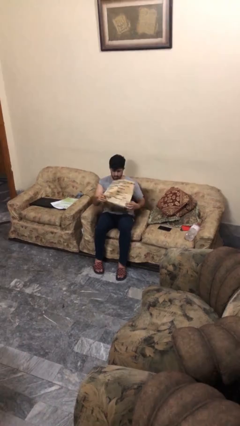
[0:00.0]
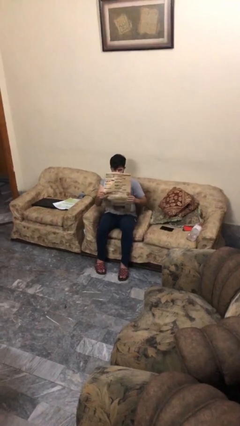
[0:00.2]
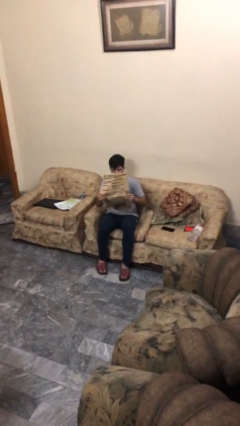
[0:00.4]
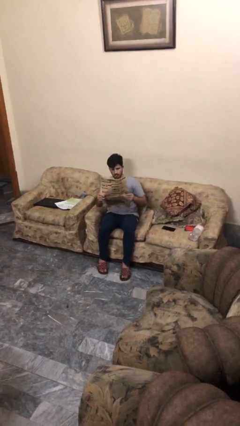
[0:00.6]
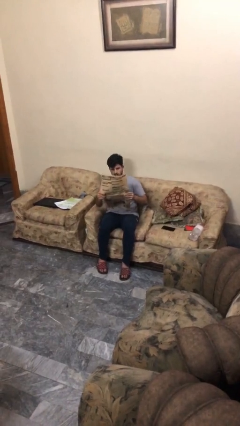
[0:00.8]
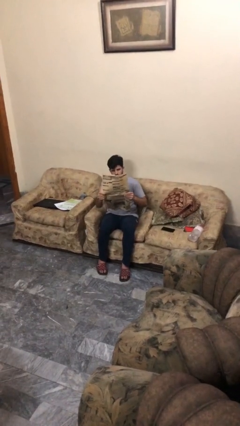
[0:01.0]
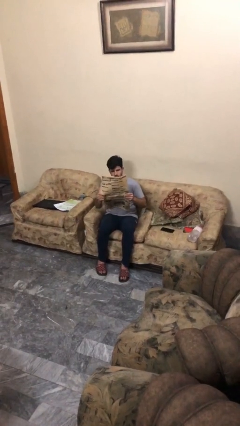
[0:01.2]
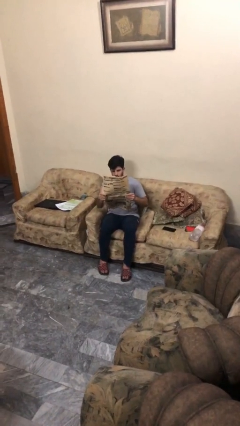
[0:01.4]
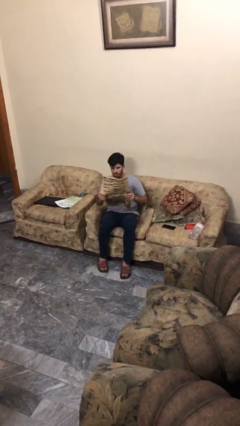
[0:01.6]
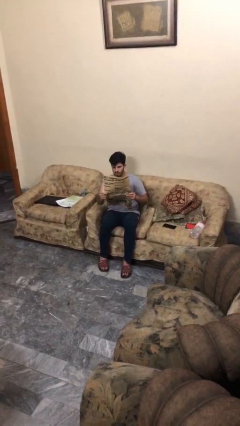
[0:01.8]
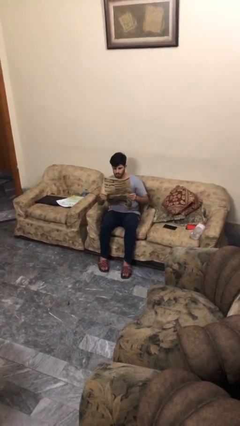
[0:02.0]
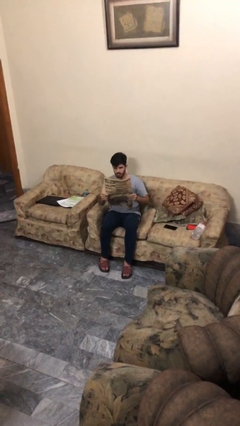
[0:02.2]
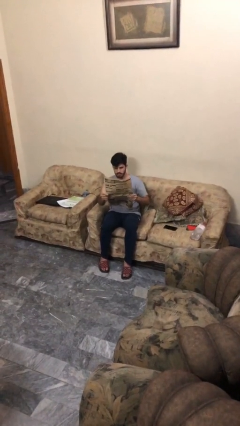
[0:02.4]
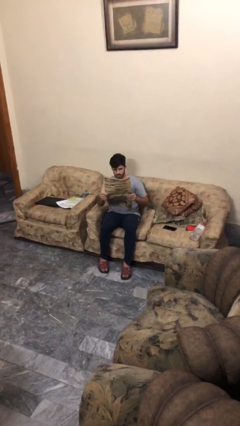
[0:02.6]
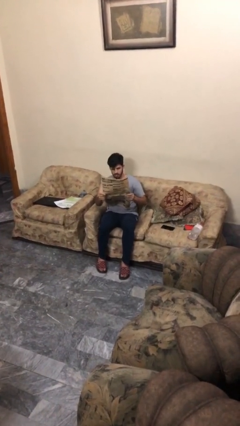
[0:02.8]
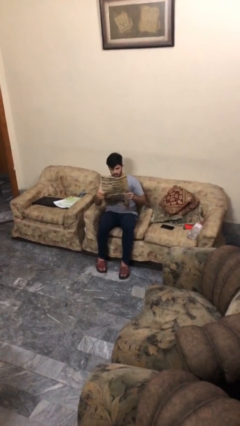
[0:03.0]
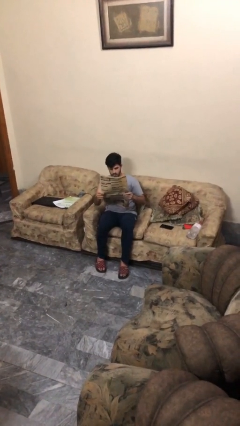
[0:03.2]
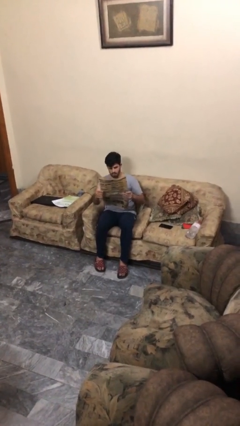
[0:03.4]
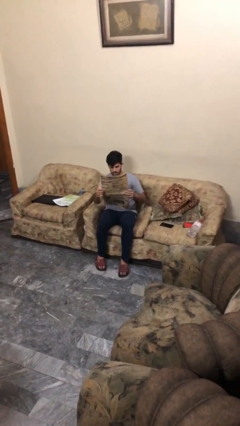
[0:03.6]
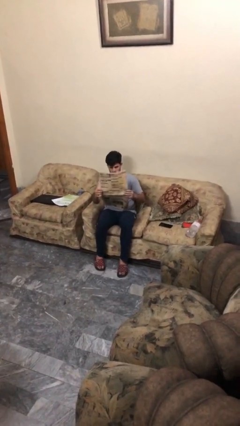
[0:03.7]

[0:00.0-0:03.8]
person reads newspaper

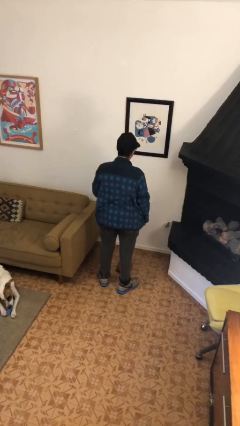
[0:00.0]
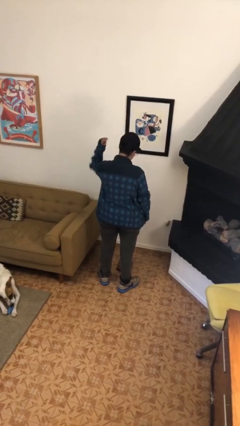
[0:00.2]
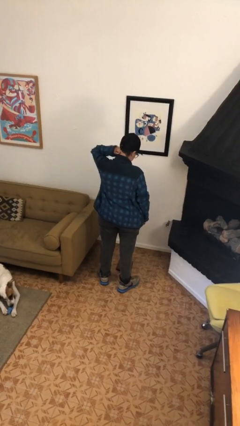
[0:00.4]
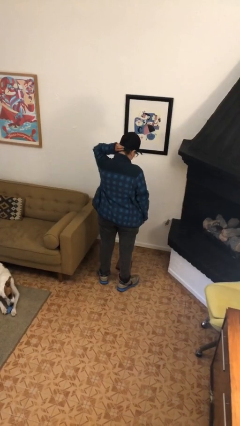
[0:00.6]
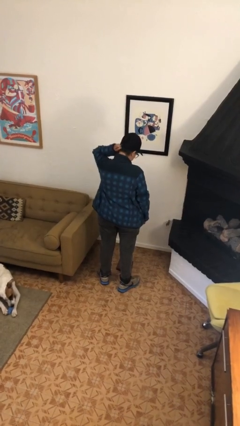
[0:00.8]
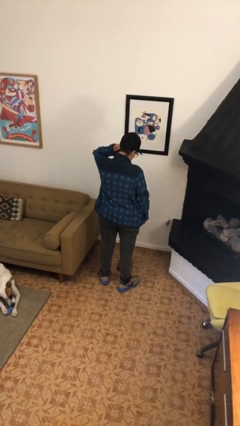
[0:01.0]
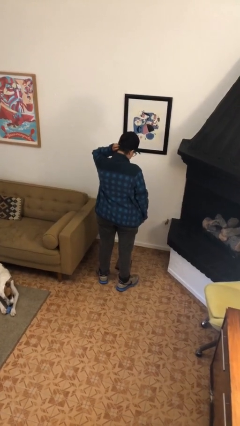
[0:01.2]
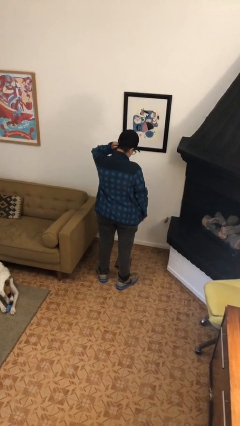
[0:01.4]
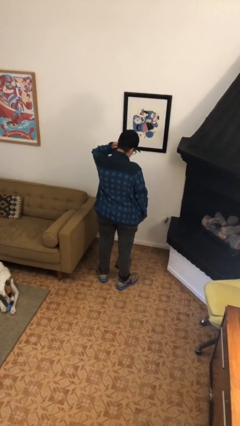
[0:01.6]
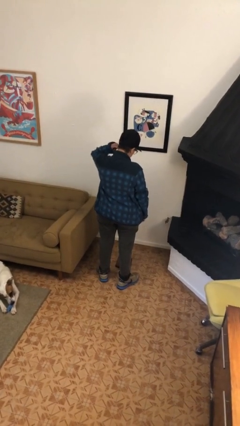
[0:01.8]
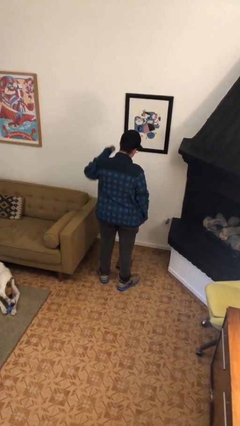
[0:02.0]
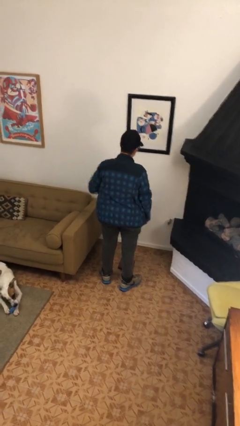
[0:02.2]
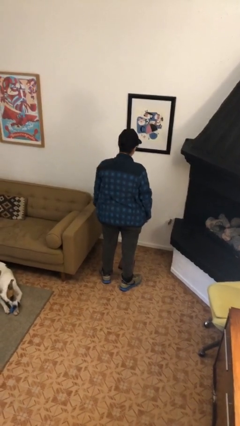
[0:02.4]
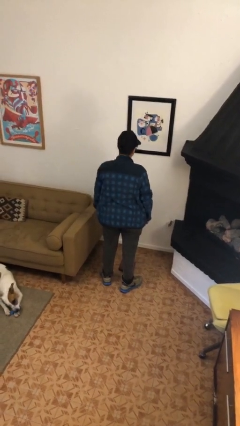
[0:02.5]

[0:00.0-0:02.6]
person scratches face

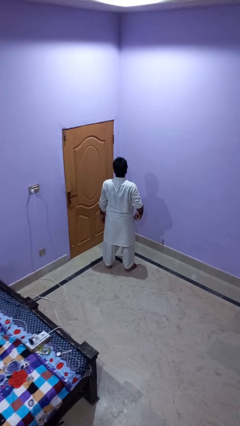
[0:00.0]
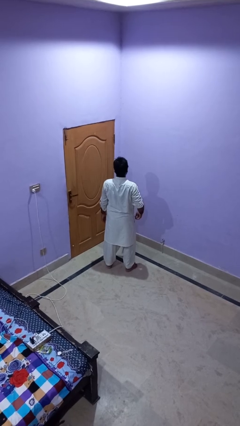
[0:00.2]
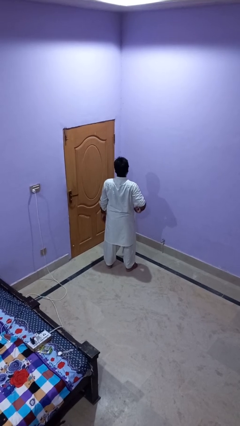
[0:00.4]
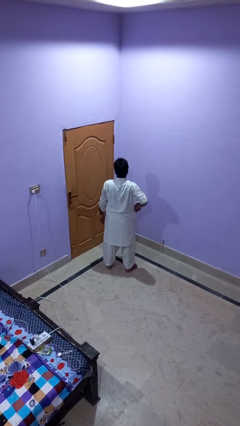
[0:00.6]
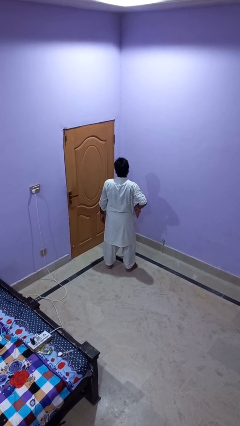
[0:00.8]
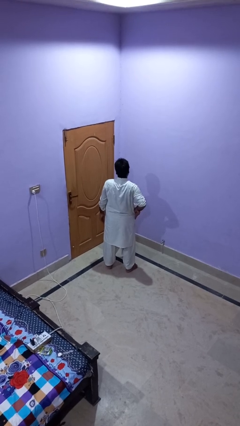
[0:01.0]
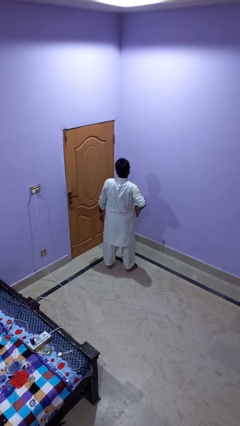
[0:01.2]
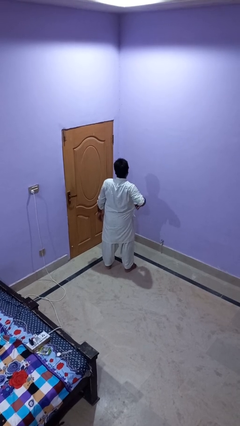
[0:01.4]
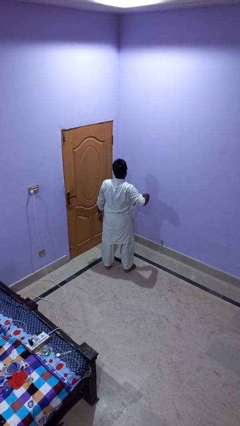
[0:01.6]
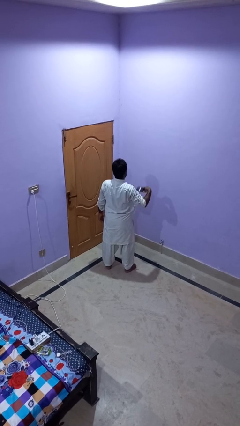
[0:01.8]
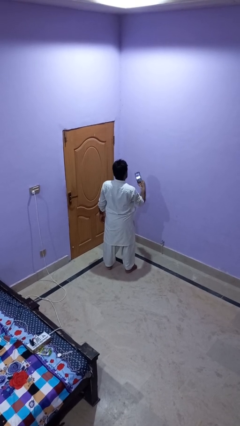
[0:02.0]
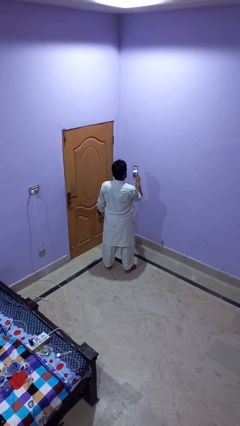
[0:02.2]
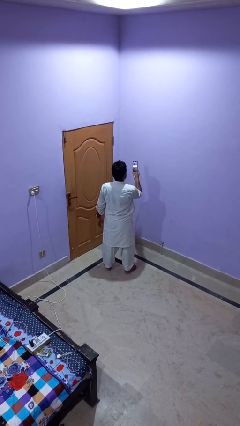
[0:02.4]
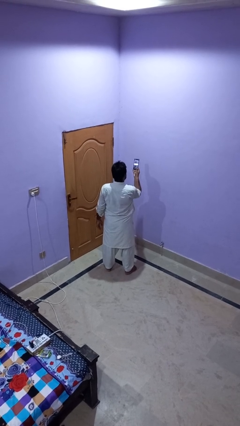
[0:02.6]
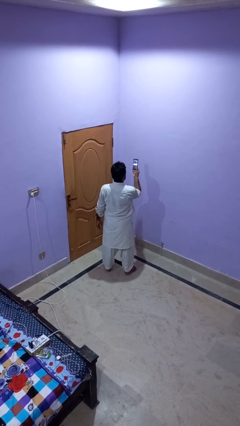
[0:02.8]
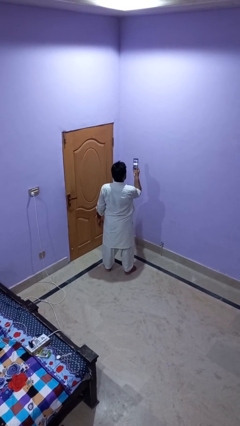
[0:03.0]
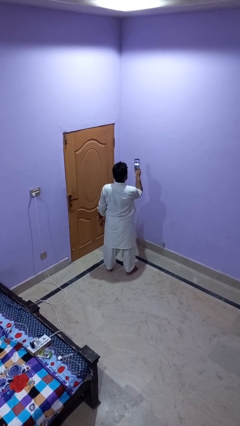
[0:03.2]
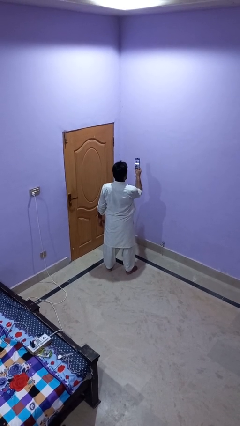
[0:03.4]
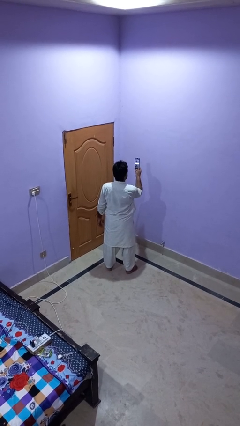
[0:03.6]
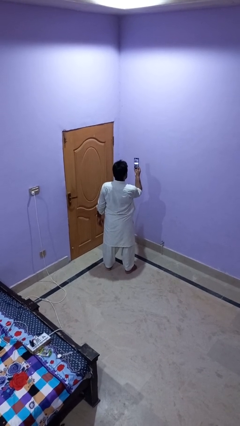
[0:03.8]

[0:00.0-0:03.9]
person takes phone from pocket

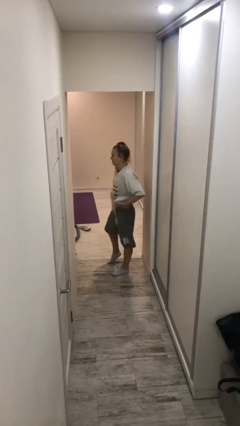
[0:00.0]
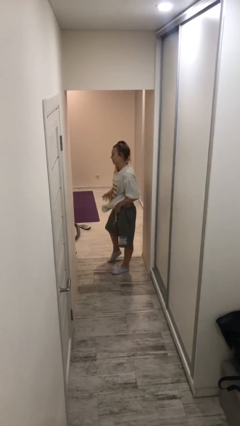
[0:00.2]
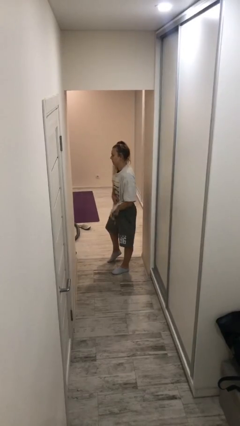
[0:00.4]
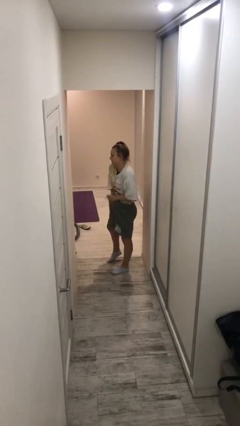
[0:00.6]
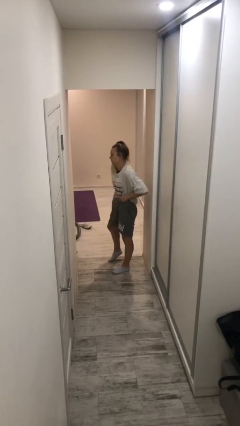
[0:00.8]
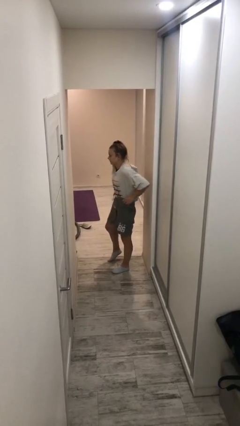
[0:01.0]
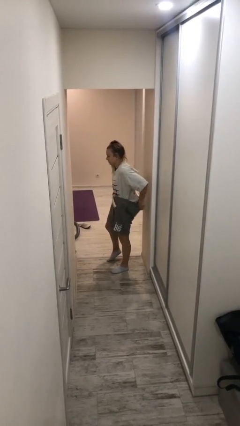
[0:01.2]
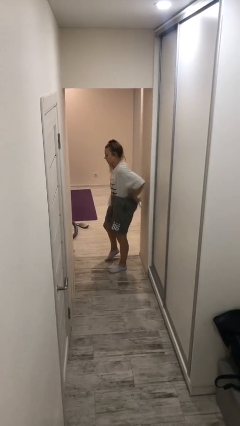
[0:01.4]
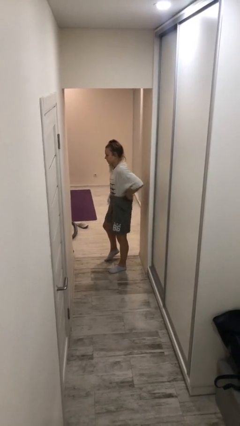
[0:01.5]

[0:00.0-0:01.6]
person tucks in shirt

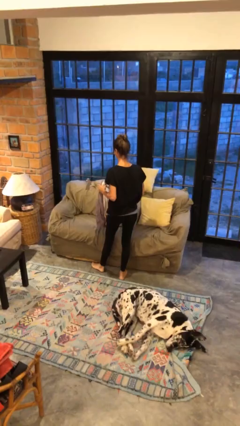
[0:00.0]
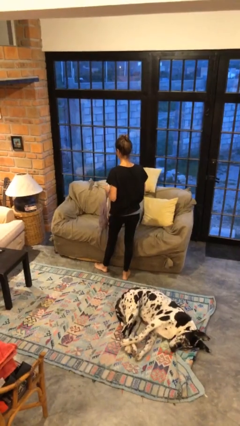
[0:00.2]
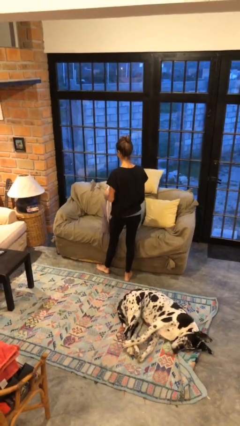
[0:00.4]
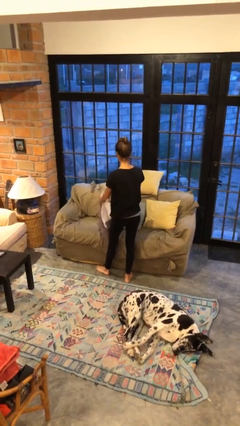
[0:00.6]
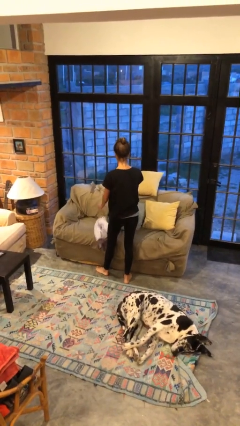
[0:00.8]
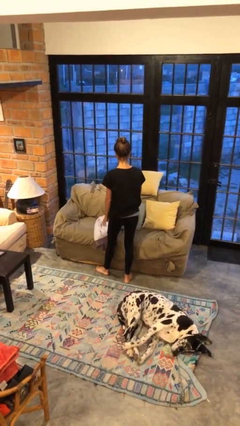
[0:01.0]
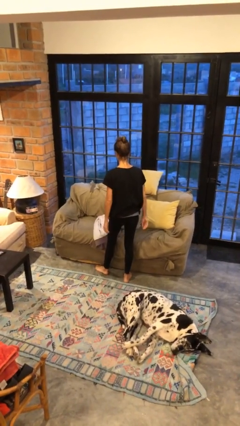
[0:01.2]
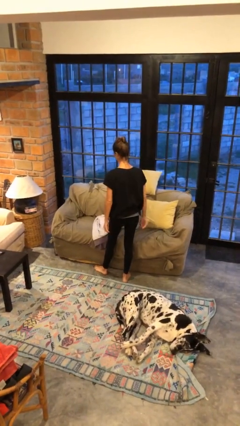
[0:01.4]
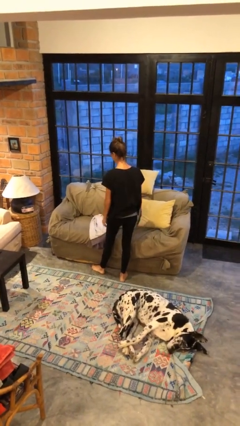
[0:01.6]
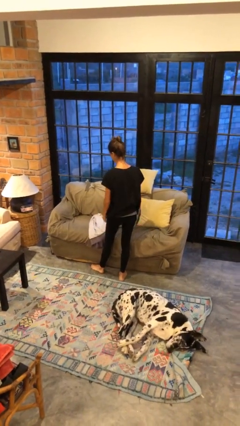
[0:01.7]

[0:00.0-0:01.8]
person puts down object on couch

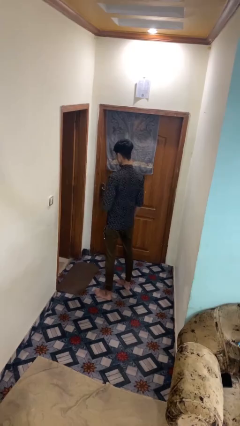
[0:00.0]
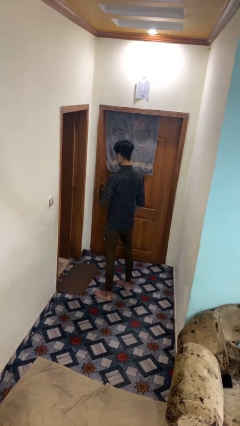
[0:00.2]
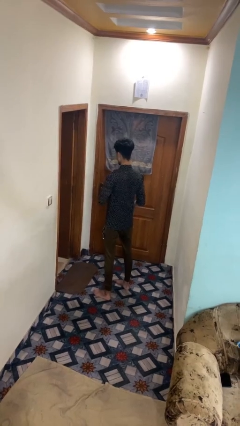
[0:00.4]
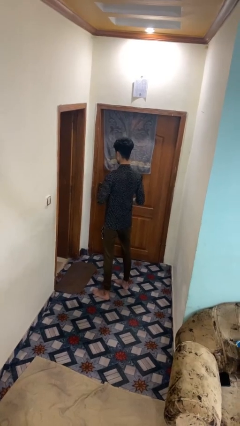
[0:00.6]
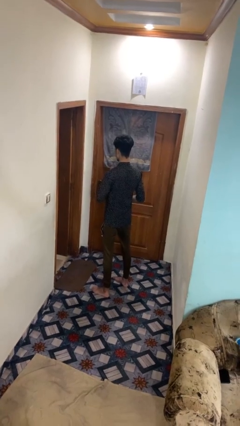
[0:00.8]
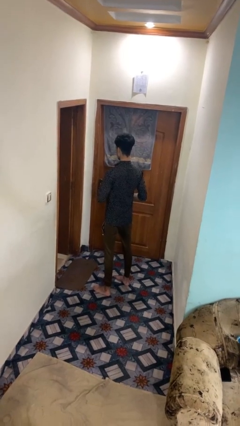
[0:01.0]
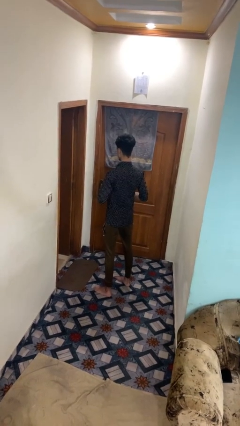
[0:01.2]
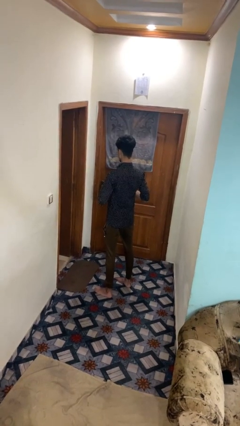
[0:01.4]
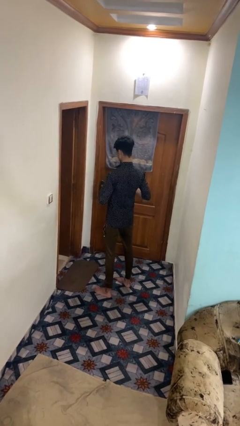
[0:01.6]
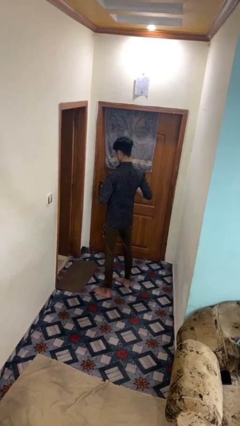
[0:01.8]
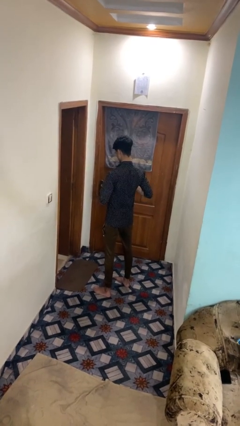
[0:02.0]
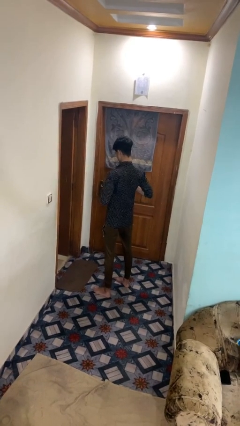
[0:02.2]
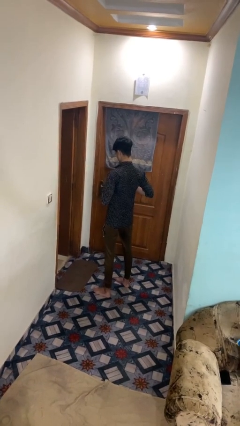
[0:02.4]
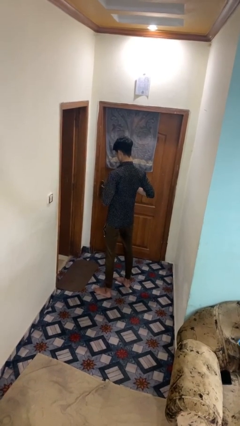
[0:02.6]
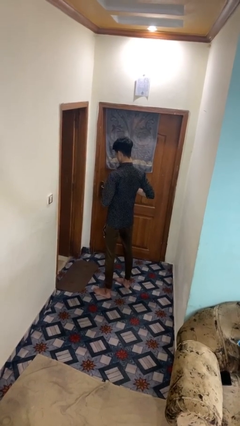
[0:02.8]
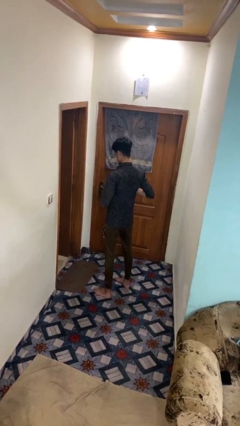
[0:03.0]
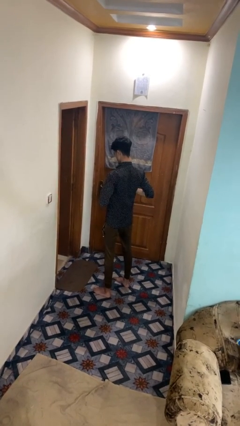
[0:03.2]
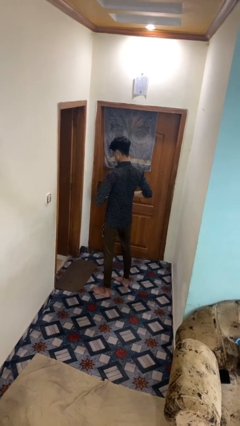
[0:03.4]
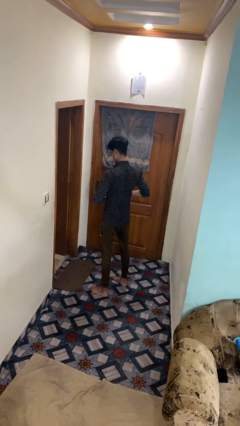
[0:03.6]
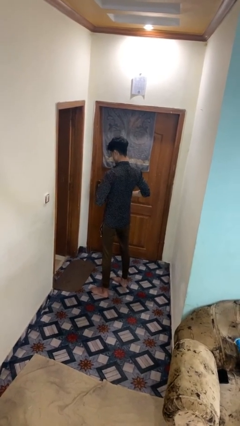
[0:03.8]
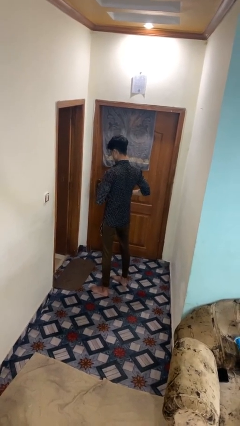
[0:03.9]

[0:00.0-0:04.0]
person unbuttons shirt
